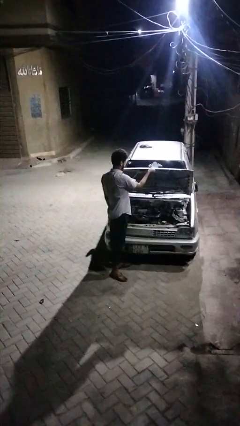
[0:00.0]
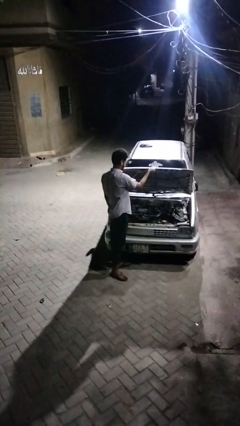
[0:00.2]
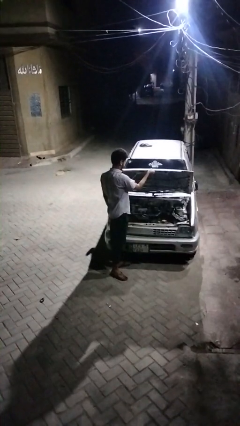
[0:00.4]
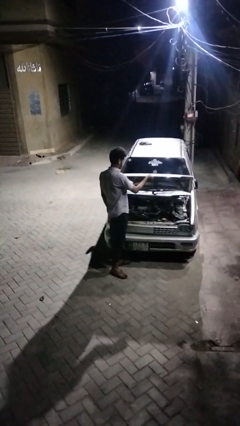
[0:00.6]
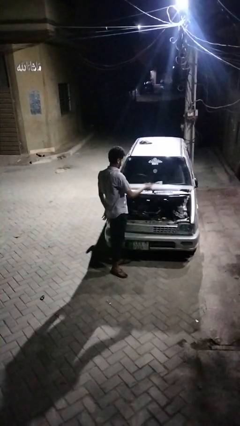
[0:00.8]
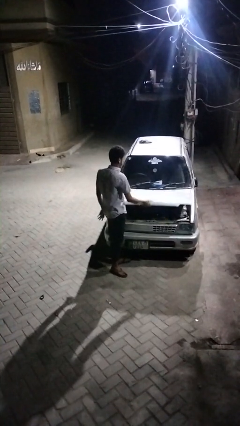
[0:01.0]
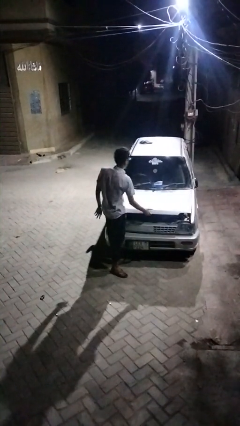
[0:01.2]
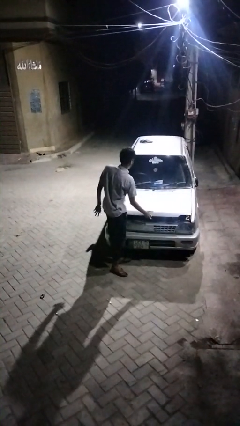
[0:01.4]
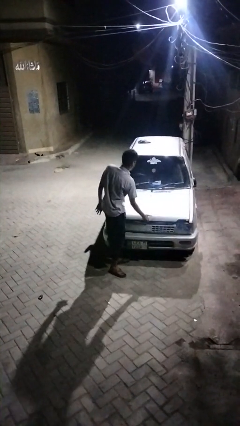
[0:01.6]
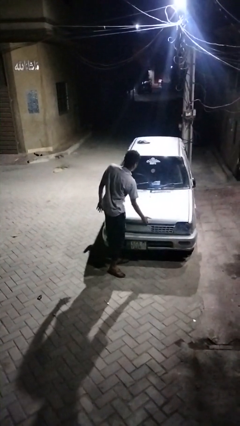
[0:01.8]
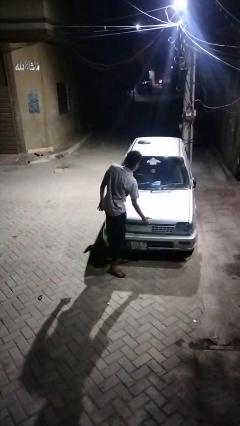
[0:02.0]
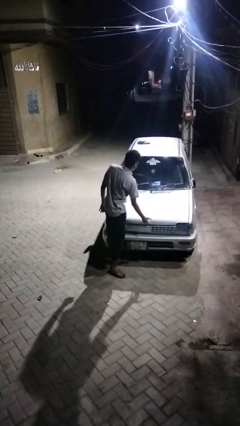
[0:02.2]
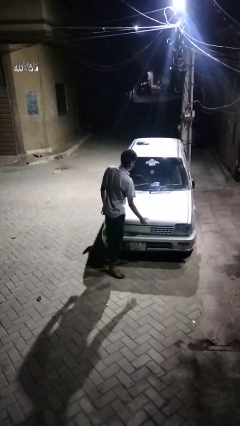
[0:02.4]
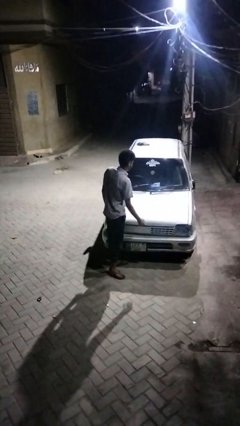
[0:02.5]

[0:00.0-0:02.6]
person closes car hood

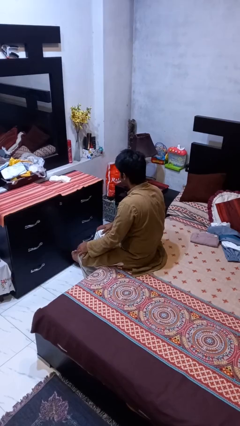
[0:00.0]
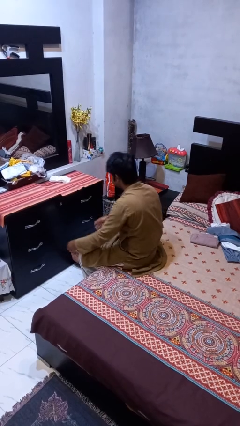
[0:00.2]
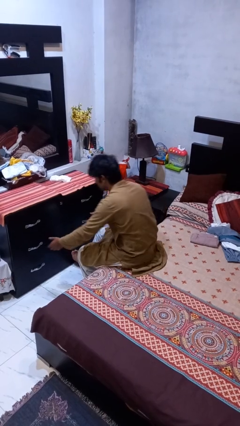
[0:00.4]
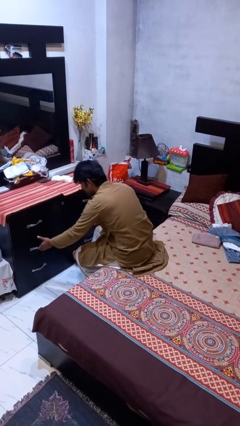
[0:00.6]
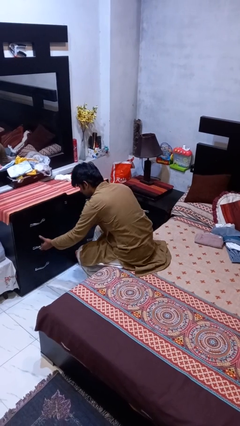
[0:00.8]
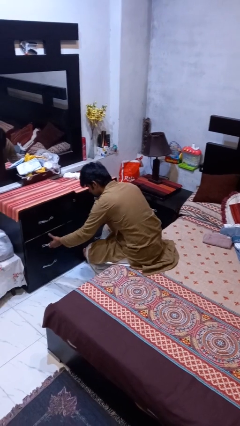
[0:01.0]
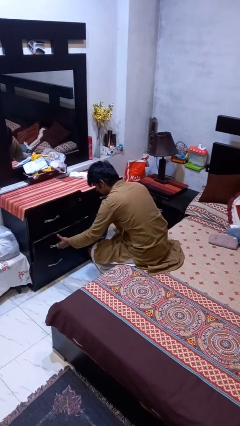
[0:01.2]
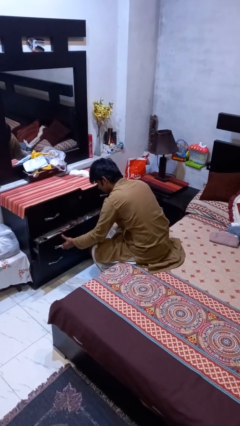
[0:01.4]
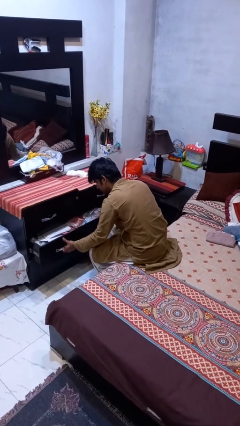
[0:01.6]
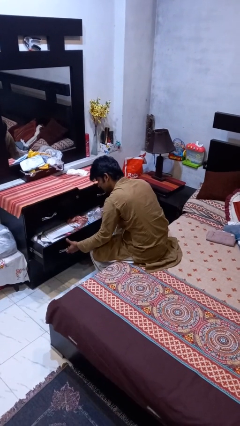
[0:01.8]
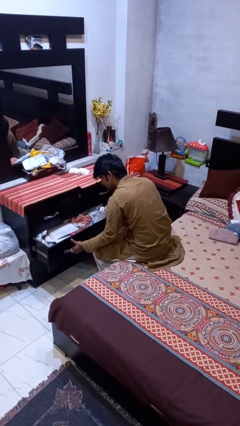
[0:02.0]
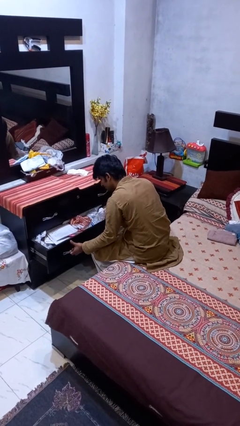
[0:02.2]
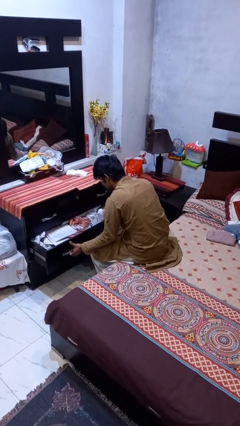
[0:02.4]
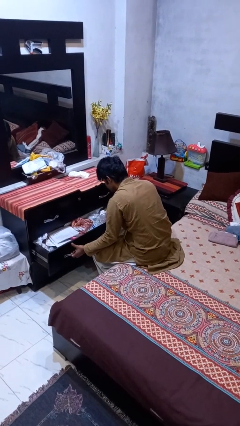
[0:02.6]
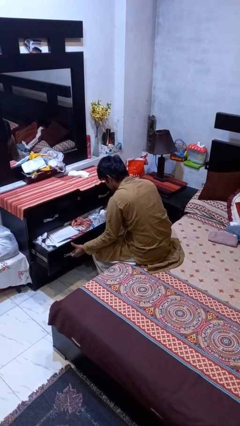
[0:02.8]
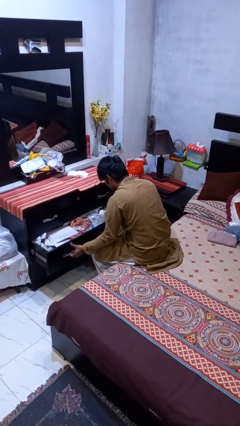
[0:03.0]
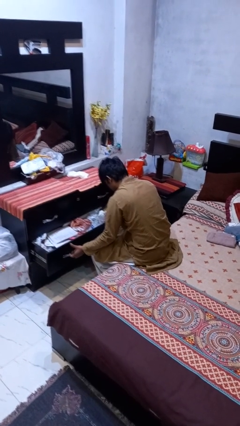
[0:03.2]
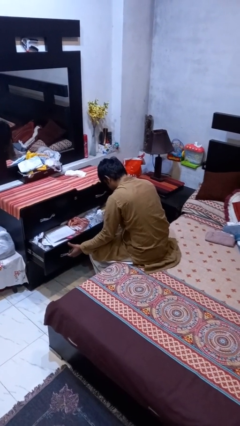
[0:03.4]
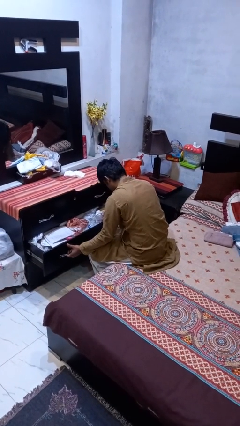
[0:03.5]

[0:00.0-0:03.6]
person opens dresser drawer

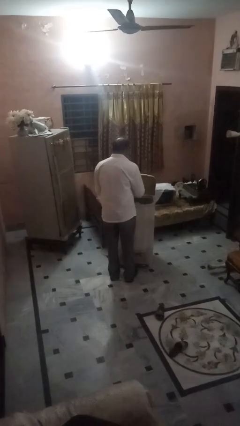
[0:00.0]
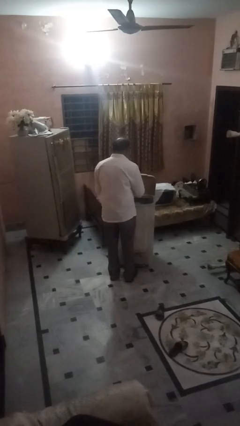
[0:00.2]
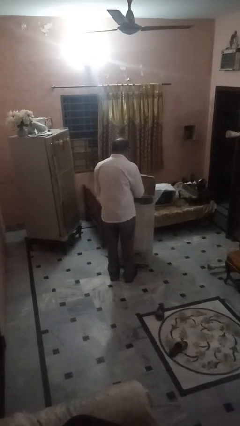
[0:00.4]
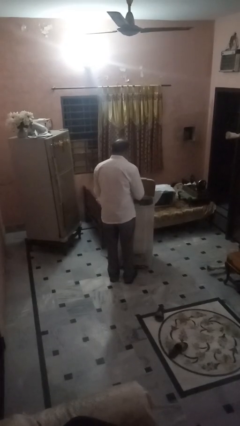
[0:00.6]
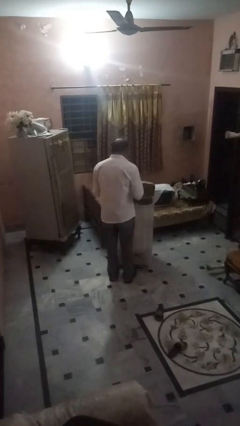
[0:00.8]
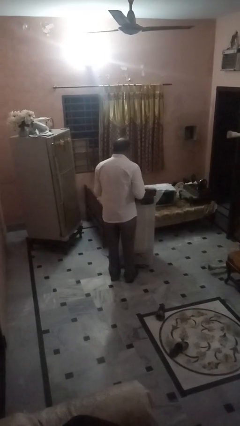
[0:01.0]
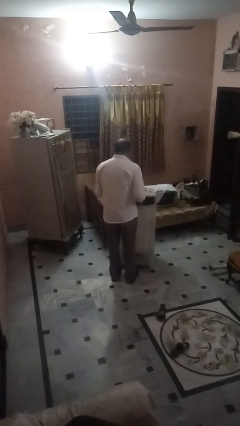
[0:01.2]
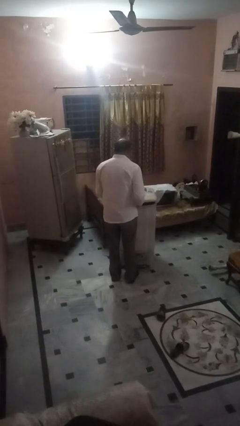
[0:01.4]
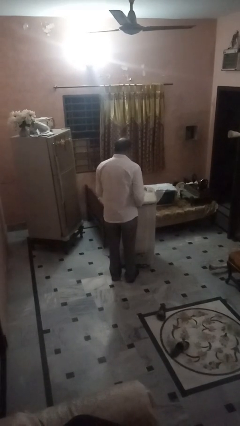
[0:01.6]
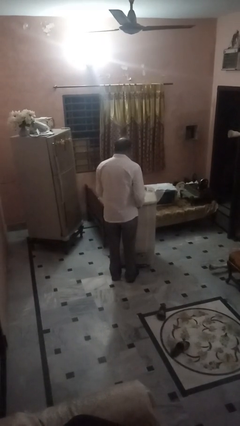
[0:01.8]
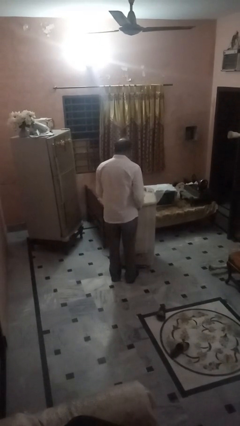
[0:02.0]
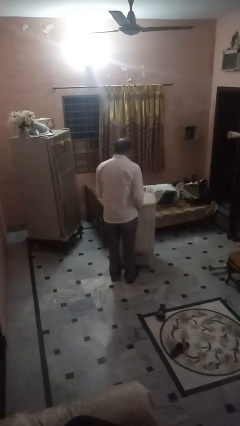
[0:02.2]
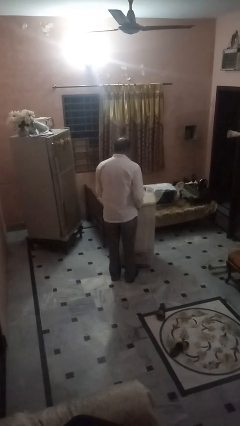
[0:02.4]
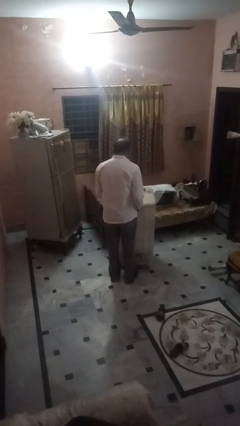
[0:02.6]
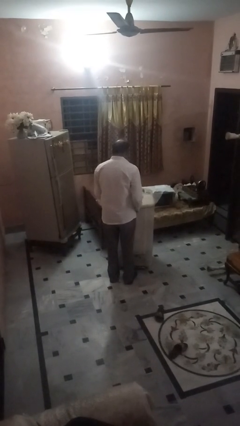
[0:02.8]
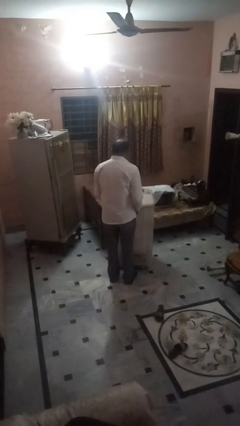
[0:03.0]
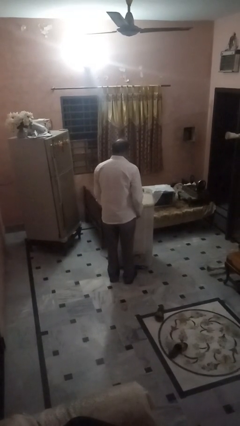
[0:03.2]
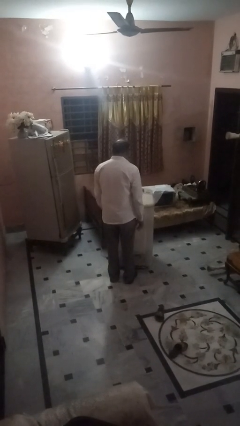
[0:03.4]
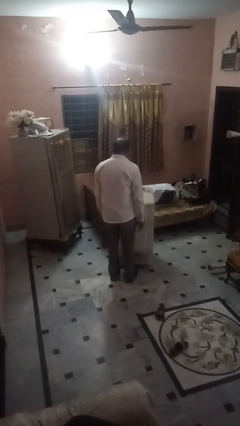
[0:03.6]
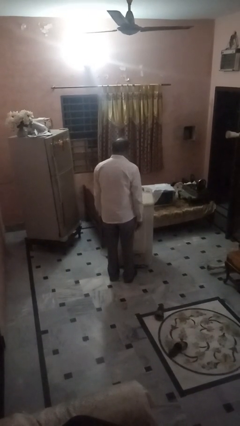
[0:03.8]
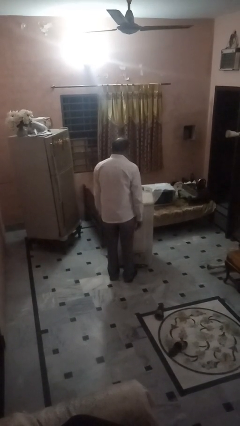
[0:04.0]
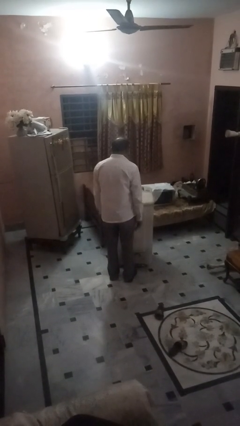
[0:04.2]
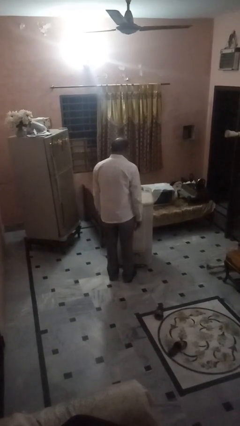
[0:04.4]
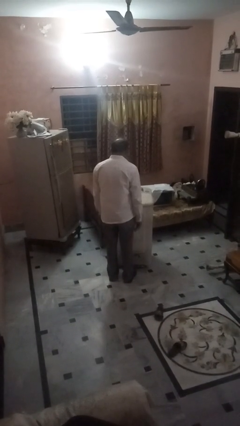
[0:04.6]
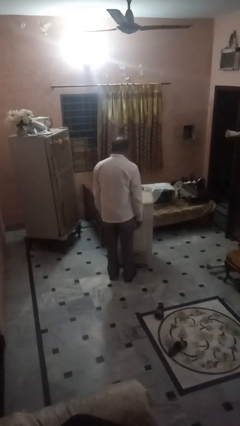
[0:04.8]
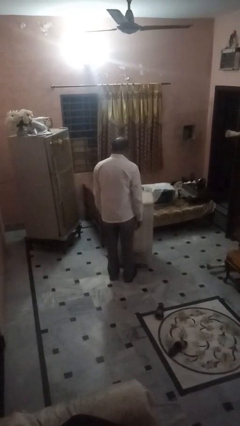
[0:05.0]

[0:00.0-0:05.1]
person closes clothes washer

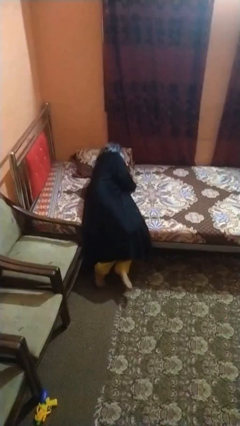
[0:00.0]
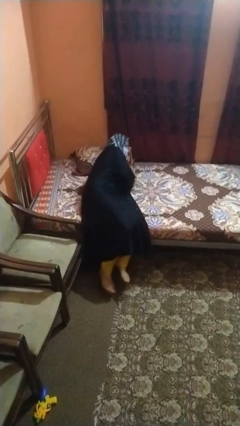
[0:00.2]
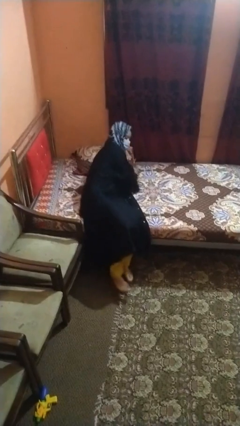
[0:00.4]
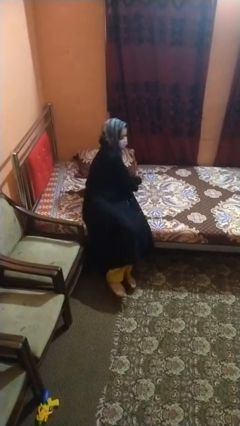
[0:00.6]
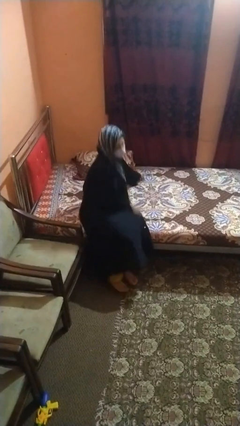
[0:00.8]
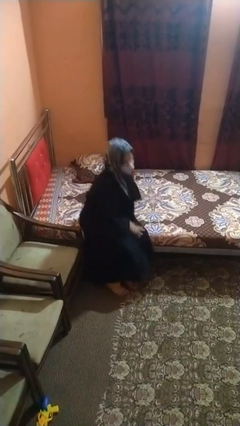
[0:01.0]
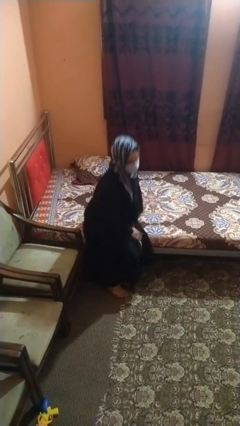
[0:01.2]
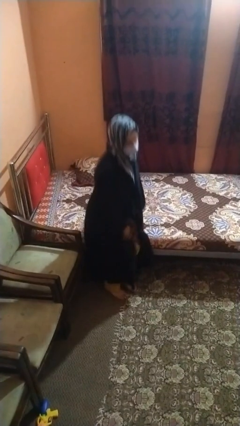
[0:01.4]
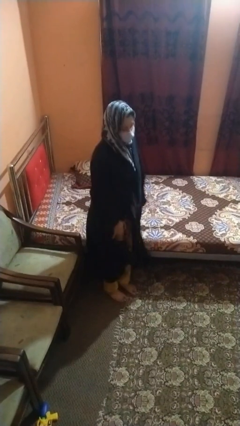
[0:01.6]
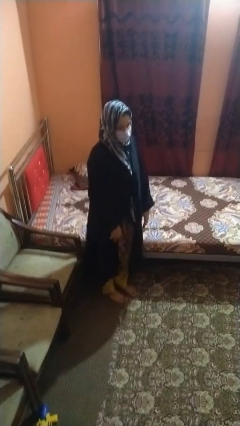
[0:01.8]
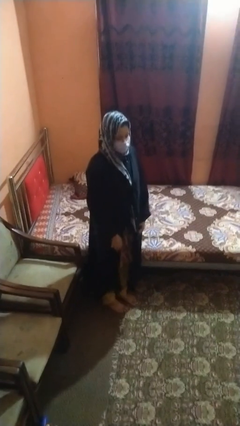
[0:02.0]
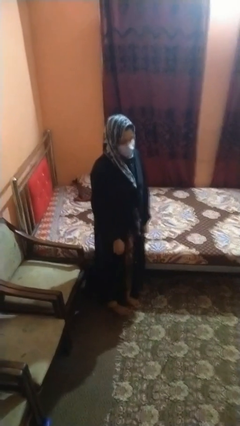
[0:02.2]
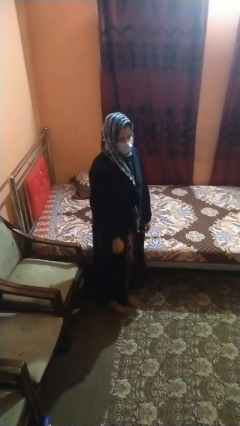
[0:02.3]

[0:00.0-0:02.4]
person stands up

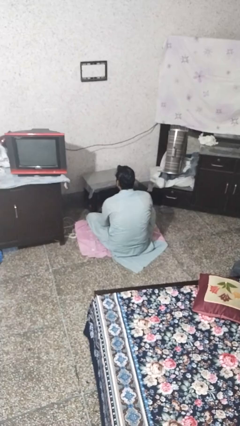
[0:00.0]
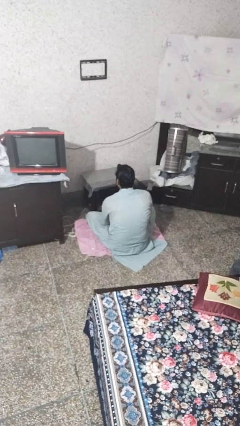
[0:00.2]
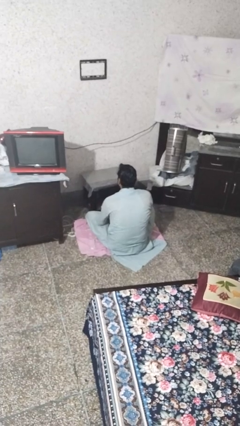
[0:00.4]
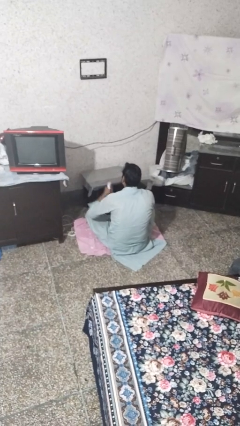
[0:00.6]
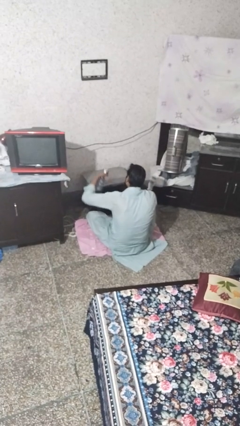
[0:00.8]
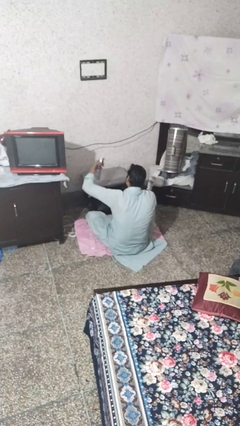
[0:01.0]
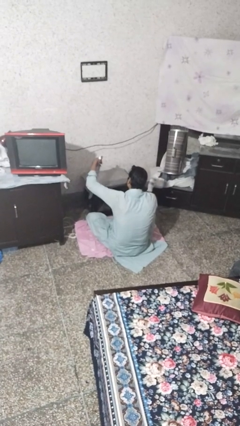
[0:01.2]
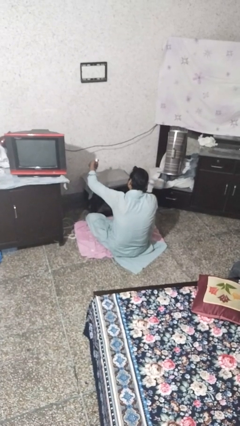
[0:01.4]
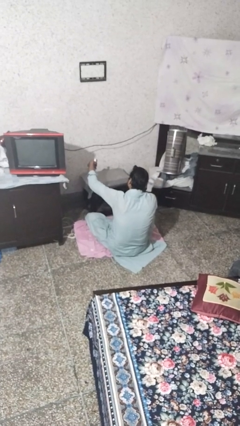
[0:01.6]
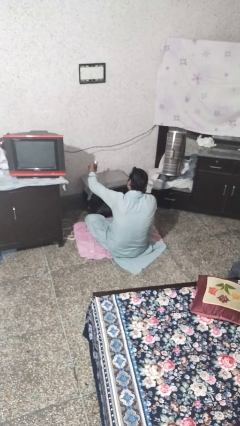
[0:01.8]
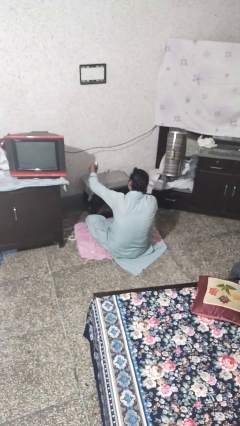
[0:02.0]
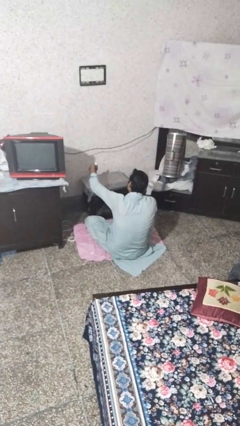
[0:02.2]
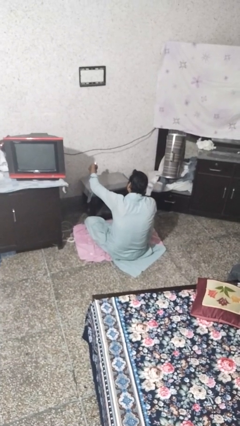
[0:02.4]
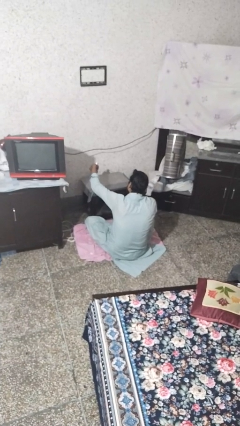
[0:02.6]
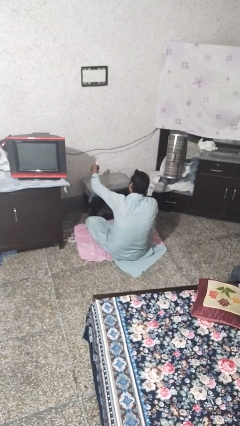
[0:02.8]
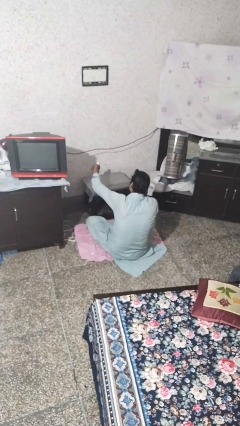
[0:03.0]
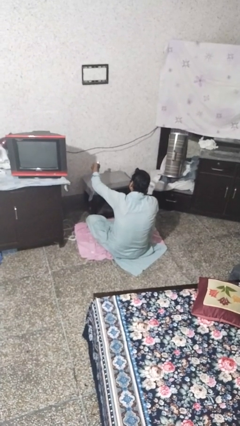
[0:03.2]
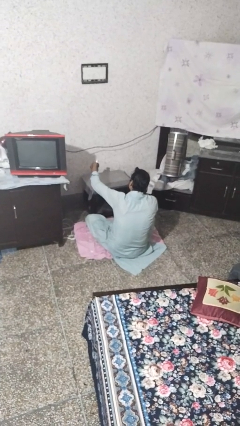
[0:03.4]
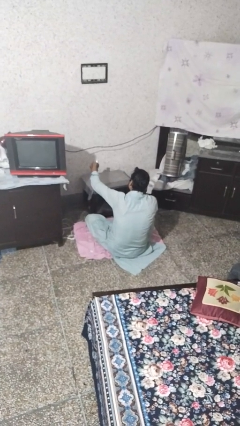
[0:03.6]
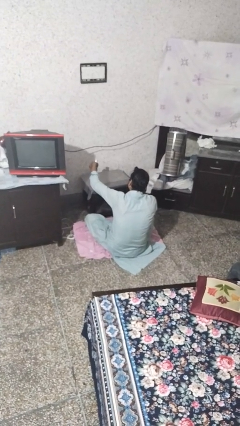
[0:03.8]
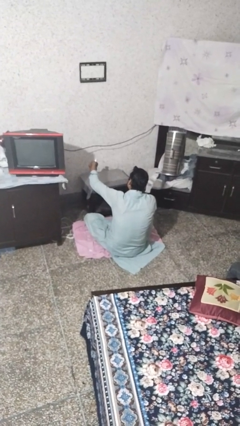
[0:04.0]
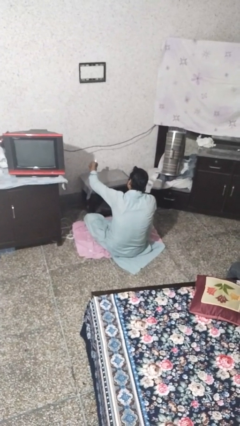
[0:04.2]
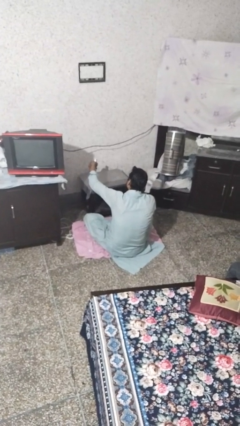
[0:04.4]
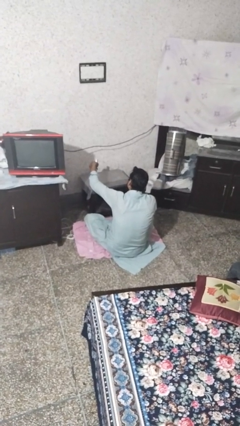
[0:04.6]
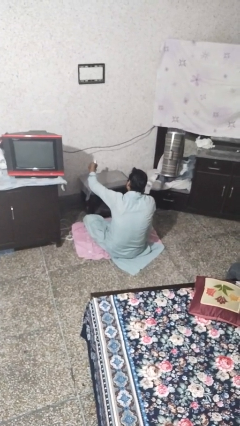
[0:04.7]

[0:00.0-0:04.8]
person sprays from bottle
